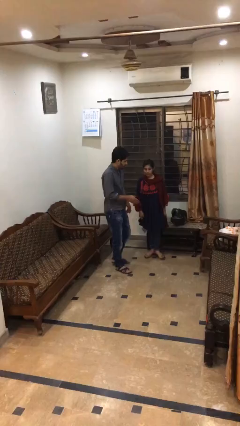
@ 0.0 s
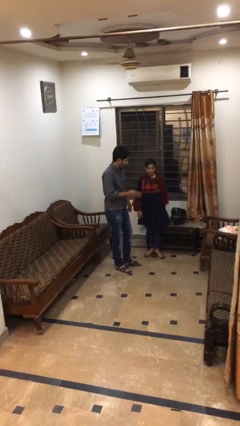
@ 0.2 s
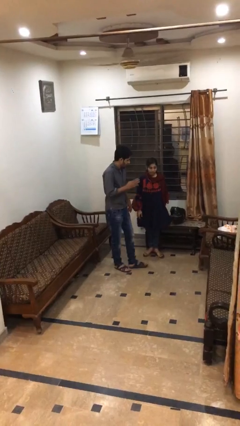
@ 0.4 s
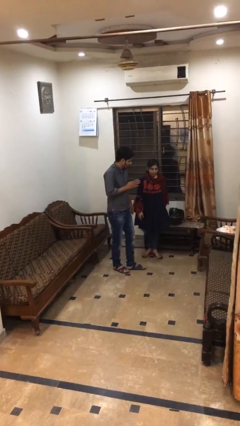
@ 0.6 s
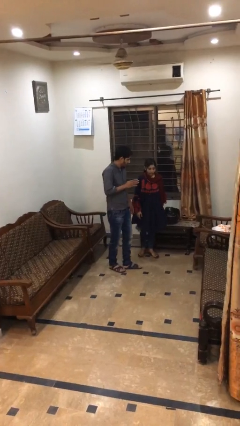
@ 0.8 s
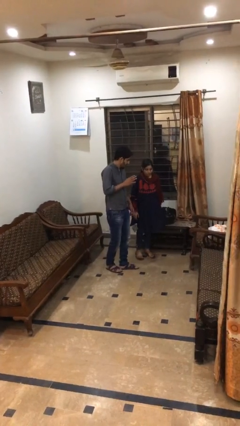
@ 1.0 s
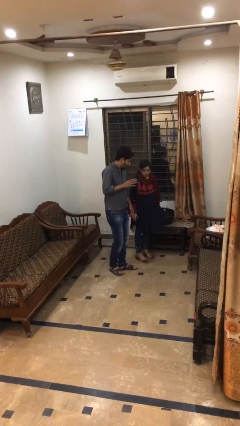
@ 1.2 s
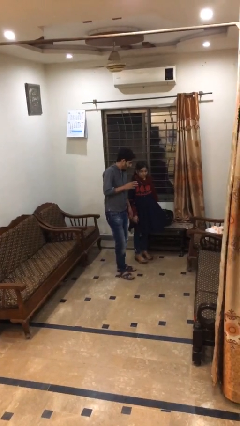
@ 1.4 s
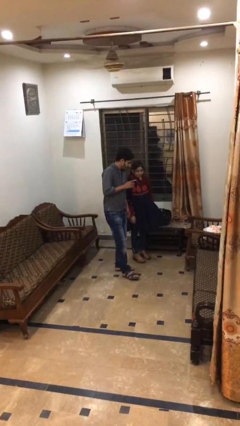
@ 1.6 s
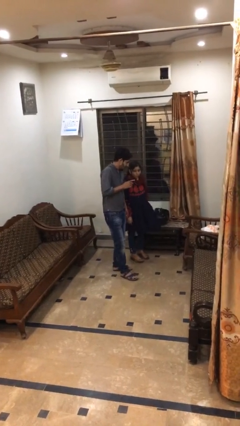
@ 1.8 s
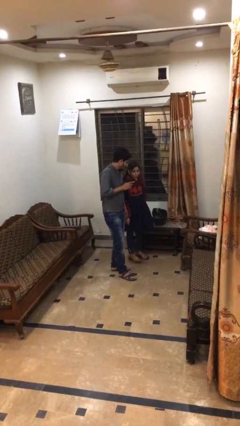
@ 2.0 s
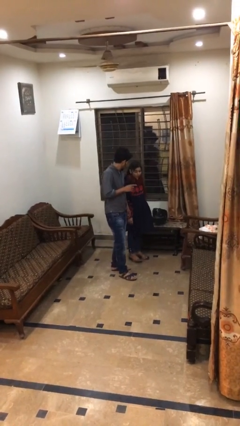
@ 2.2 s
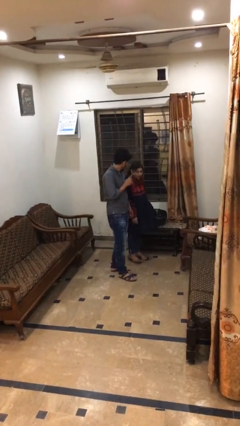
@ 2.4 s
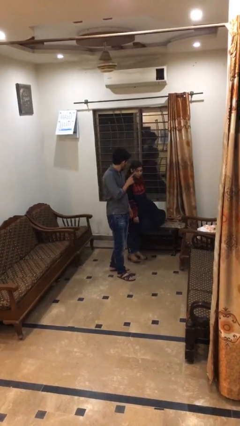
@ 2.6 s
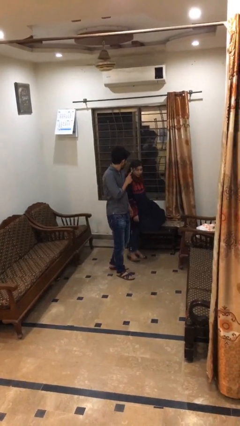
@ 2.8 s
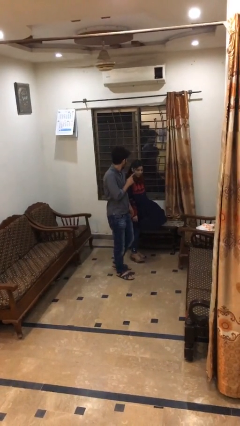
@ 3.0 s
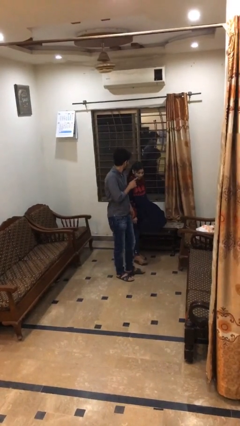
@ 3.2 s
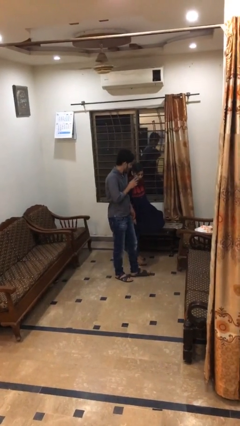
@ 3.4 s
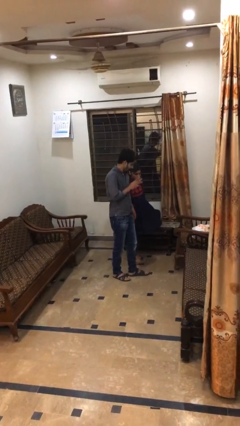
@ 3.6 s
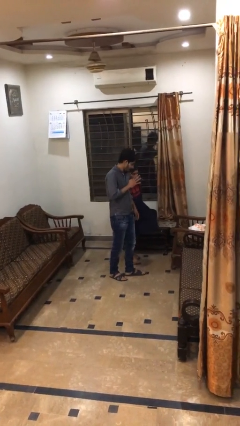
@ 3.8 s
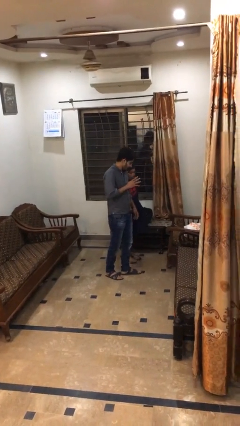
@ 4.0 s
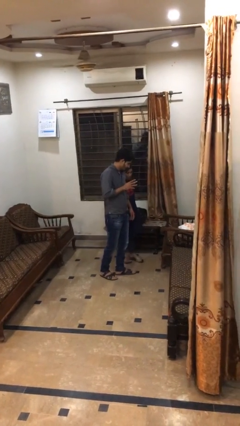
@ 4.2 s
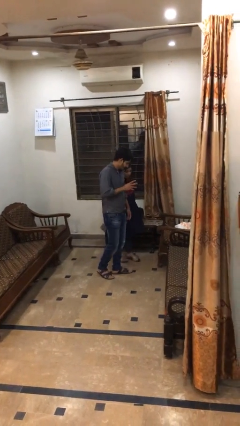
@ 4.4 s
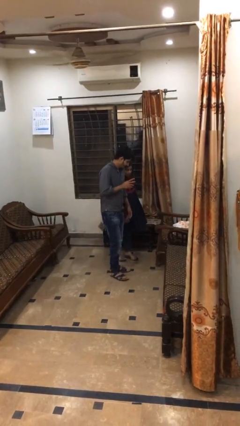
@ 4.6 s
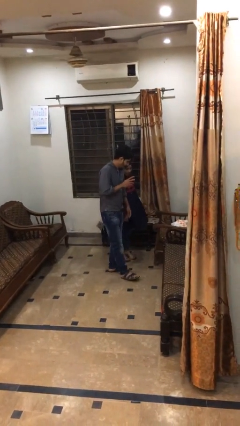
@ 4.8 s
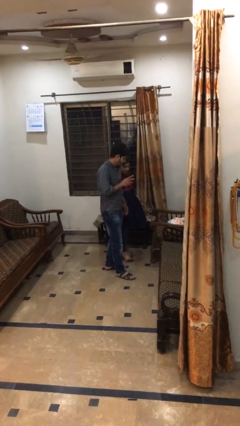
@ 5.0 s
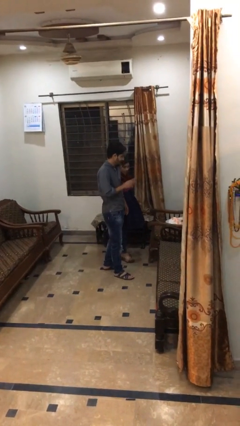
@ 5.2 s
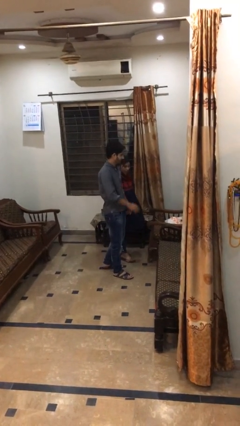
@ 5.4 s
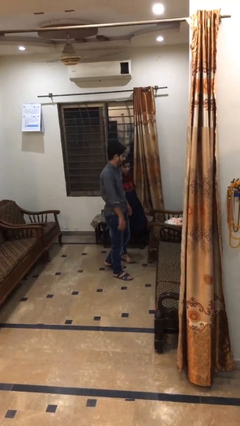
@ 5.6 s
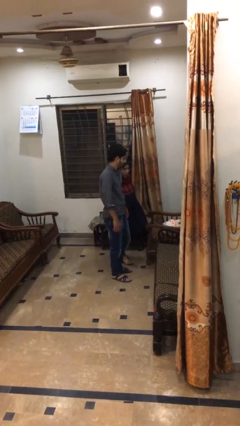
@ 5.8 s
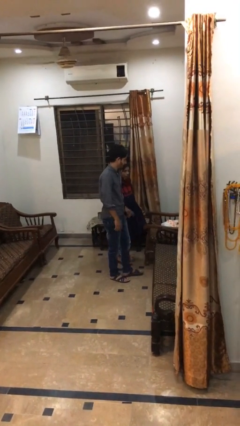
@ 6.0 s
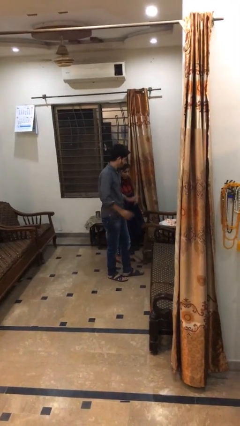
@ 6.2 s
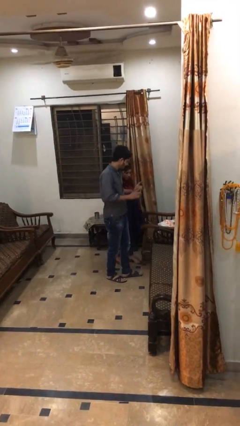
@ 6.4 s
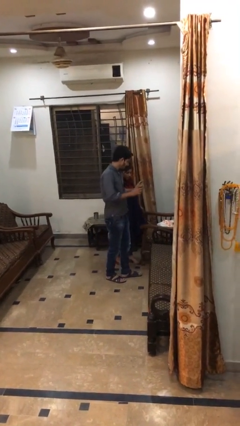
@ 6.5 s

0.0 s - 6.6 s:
person talks to person

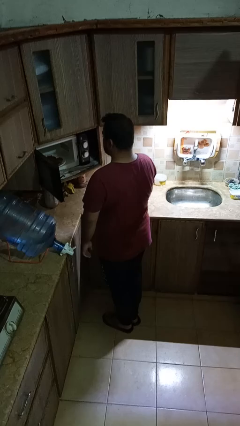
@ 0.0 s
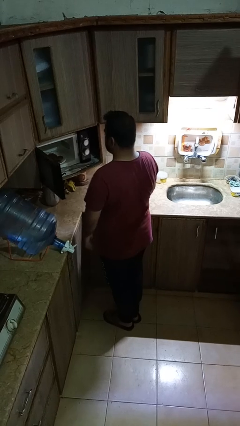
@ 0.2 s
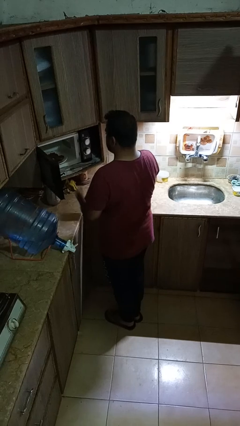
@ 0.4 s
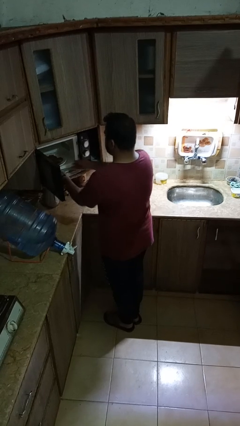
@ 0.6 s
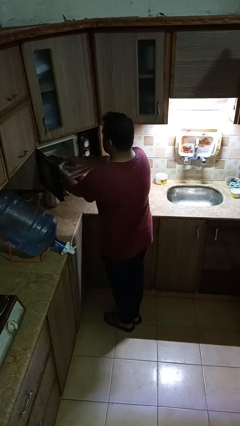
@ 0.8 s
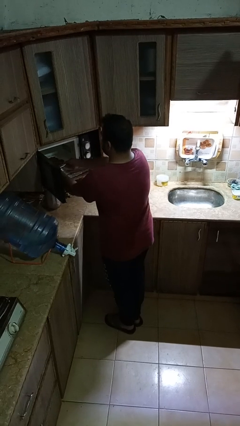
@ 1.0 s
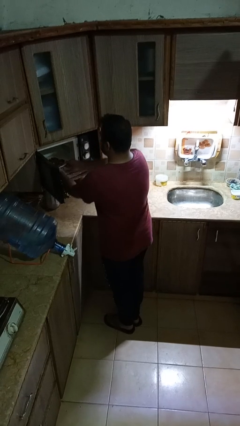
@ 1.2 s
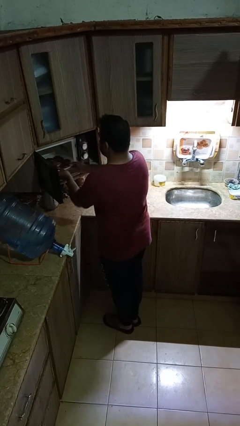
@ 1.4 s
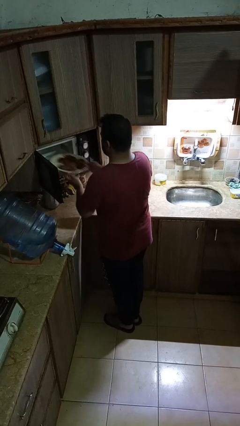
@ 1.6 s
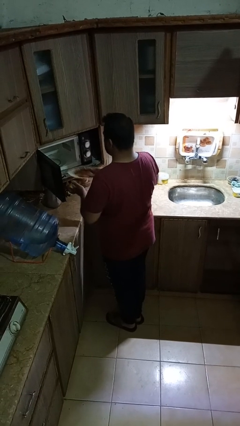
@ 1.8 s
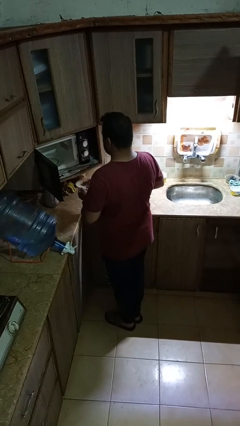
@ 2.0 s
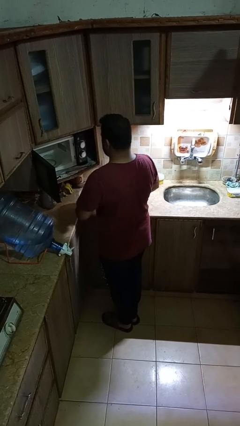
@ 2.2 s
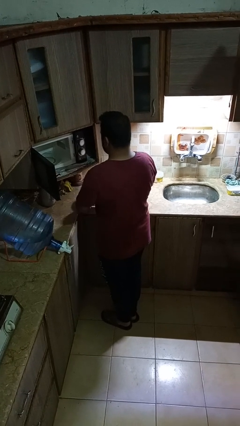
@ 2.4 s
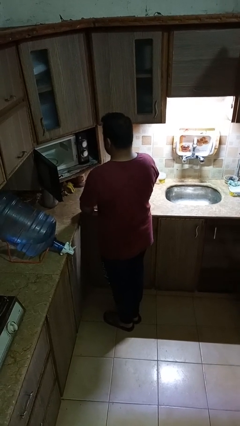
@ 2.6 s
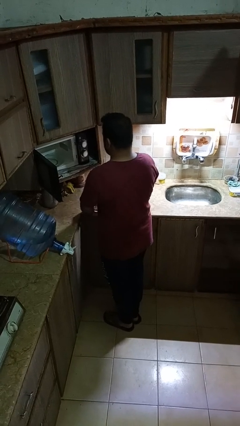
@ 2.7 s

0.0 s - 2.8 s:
person takes object from microwave

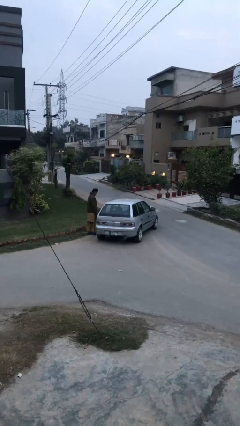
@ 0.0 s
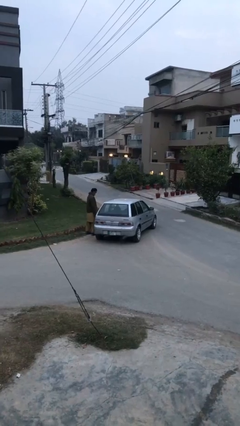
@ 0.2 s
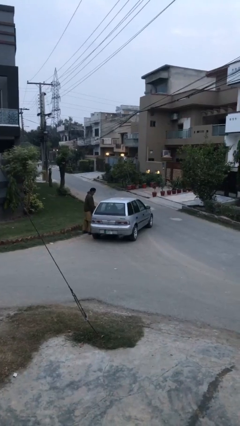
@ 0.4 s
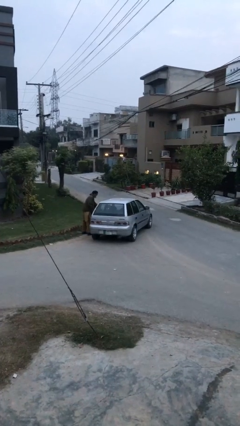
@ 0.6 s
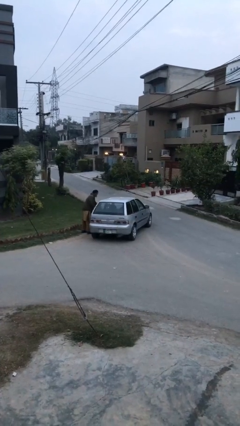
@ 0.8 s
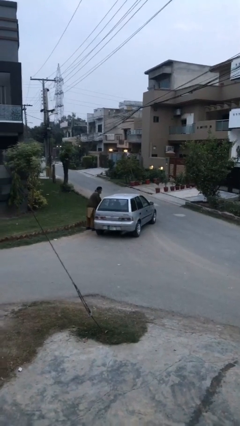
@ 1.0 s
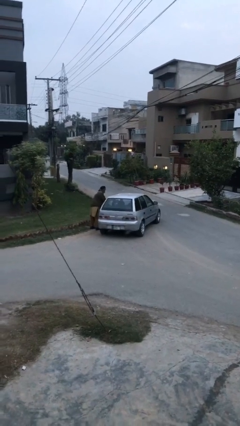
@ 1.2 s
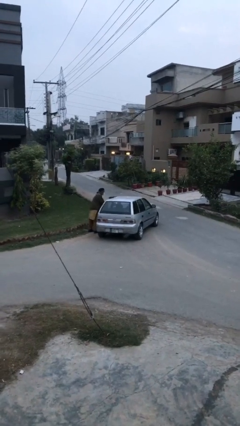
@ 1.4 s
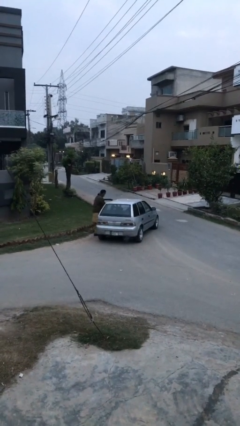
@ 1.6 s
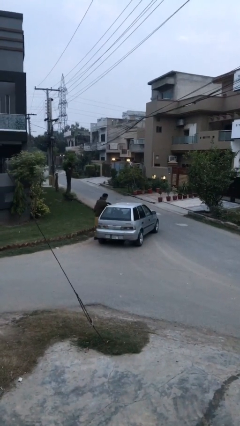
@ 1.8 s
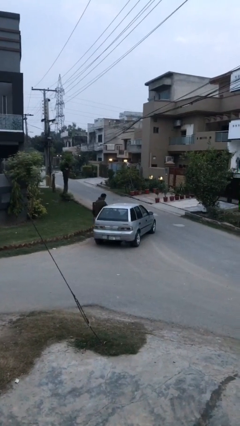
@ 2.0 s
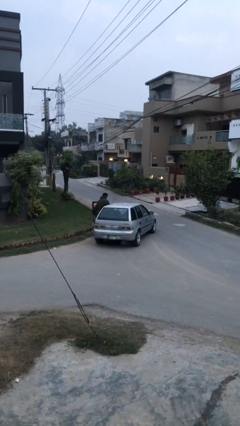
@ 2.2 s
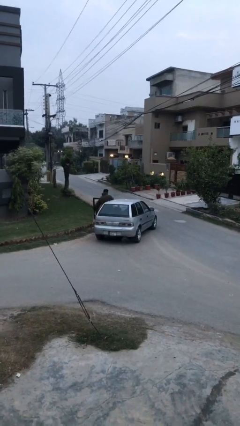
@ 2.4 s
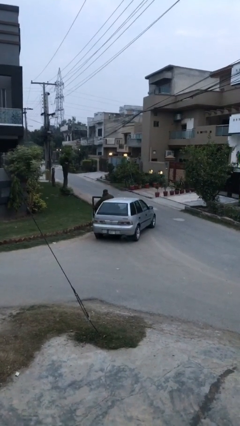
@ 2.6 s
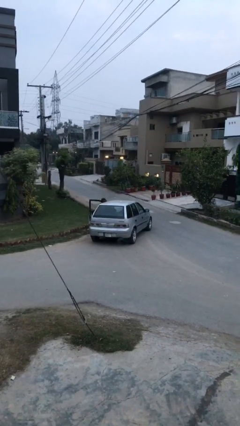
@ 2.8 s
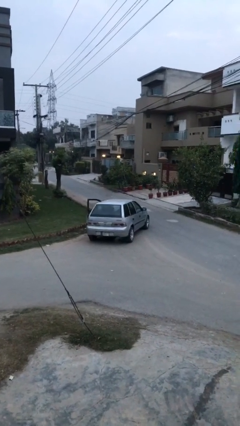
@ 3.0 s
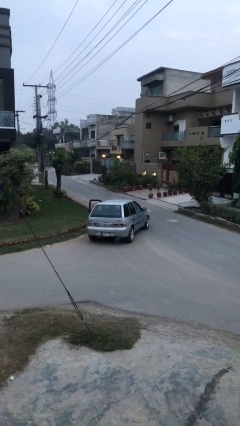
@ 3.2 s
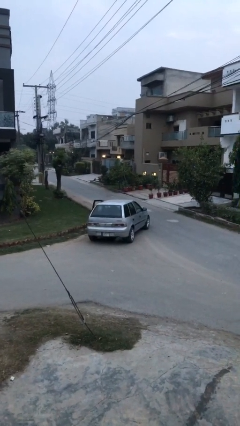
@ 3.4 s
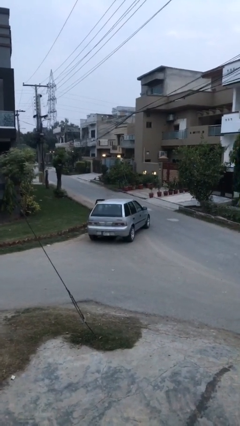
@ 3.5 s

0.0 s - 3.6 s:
car picks up person

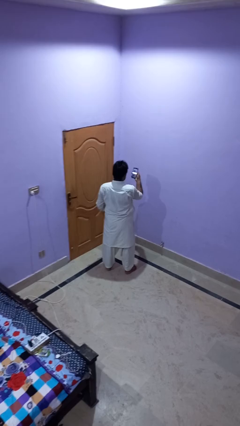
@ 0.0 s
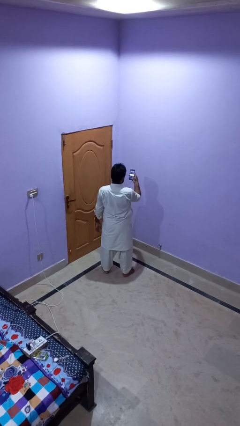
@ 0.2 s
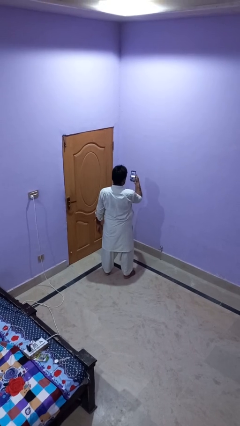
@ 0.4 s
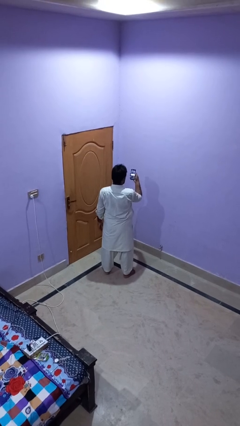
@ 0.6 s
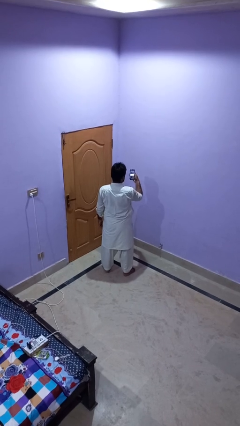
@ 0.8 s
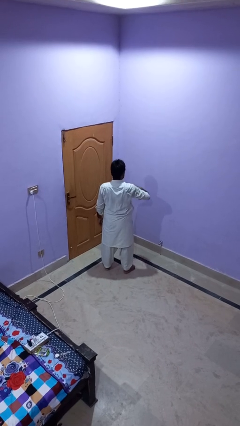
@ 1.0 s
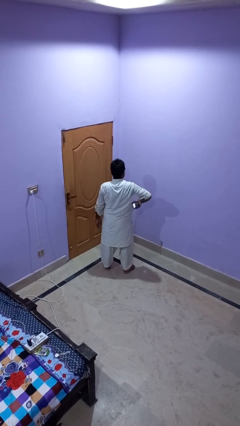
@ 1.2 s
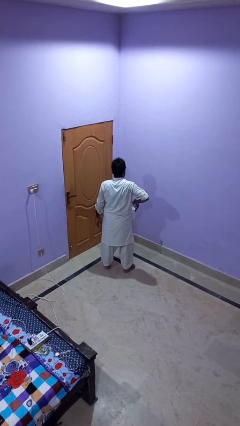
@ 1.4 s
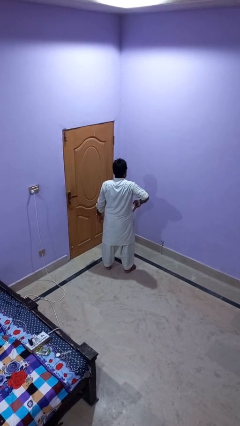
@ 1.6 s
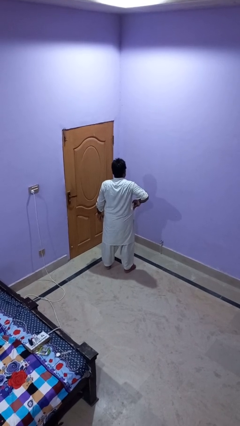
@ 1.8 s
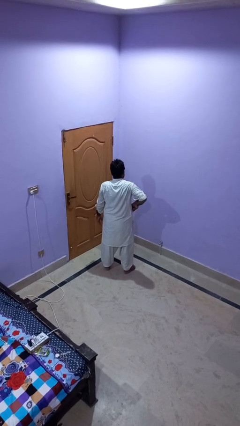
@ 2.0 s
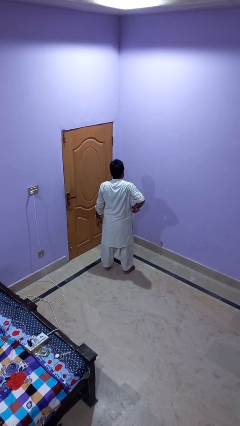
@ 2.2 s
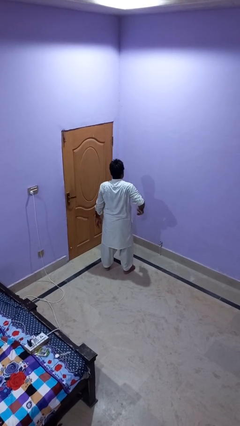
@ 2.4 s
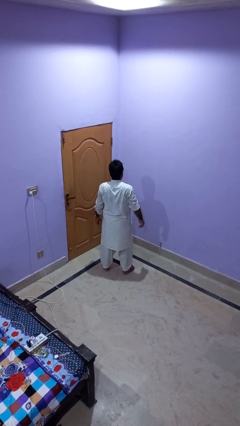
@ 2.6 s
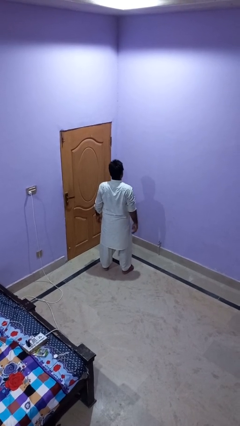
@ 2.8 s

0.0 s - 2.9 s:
person puts phone into pocket

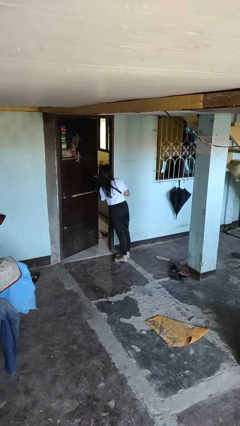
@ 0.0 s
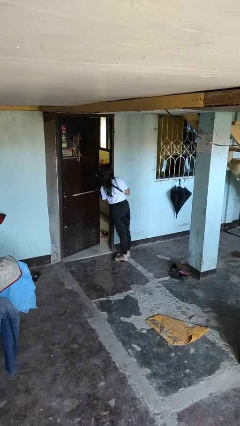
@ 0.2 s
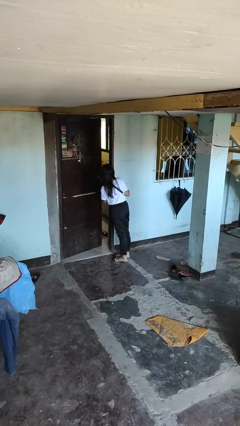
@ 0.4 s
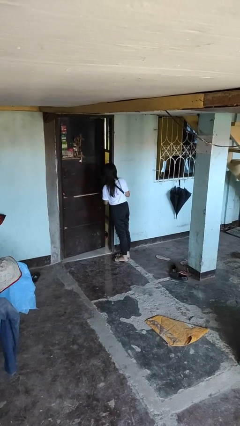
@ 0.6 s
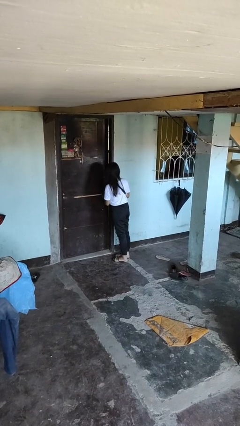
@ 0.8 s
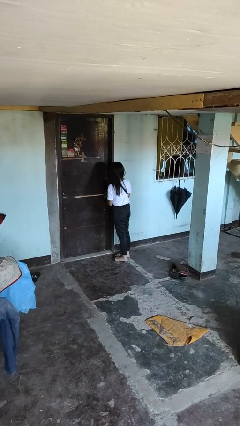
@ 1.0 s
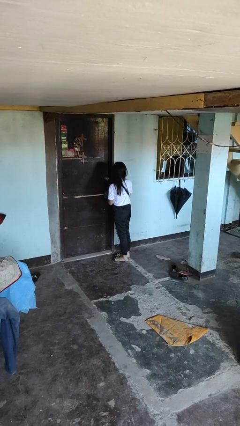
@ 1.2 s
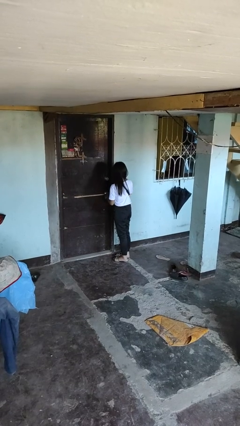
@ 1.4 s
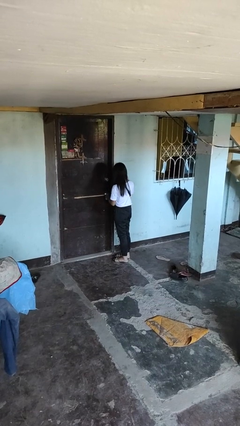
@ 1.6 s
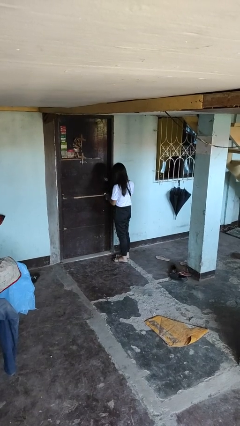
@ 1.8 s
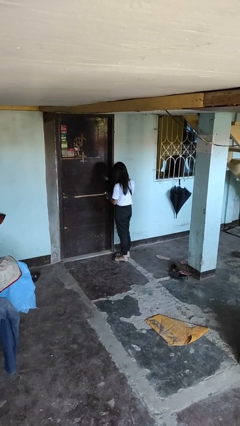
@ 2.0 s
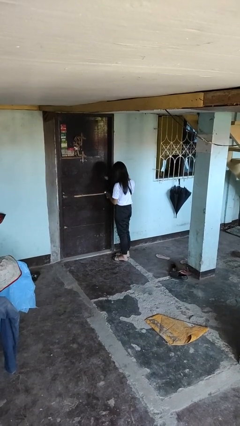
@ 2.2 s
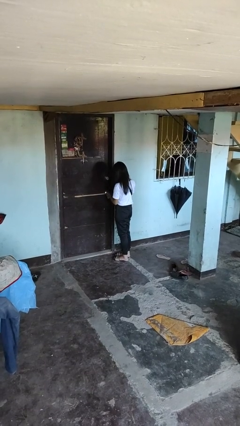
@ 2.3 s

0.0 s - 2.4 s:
person closes facility door
